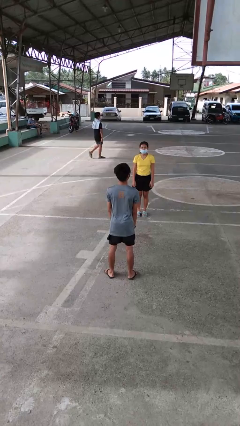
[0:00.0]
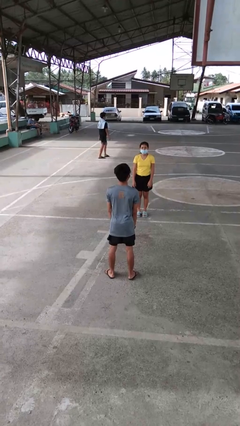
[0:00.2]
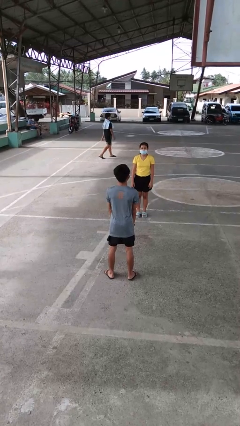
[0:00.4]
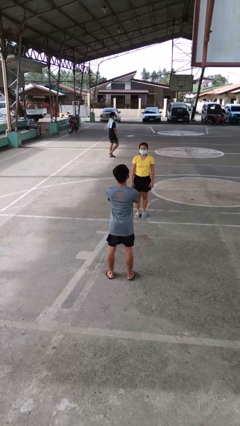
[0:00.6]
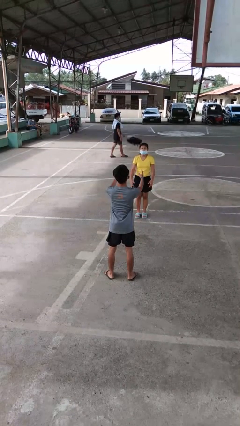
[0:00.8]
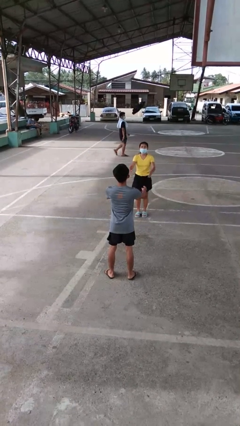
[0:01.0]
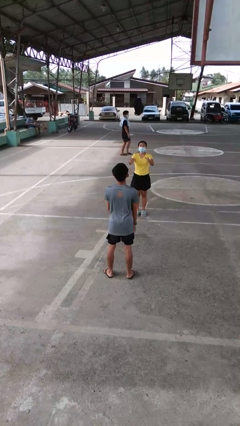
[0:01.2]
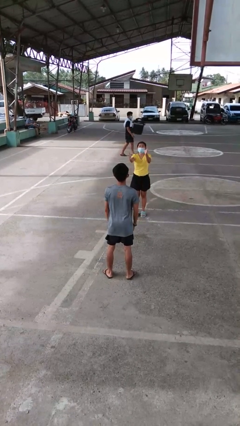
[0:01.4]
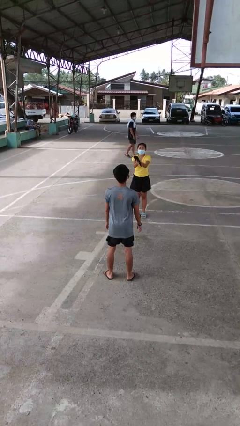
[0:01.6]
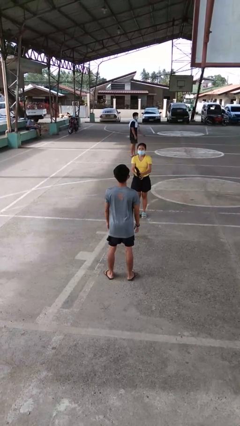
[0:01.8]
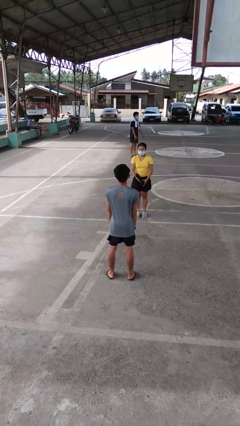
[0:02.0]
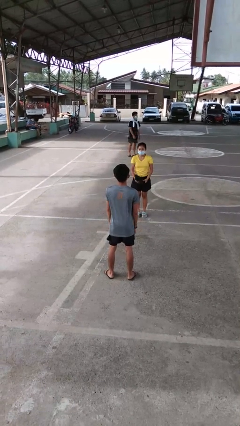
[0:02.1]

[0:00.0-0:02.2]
person throws object to person

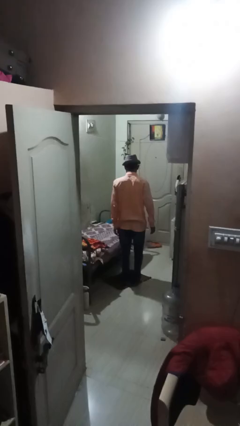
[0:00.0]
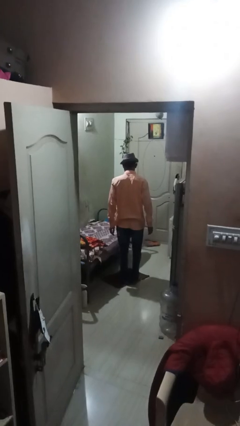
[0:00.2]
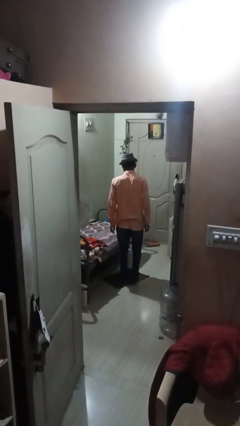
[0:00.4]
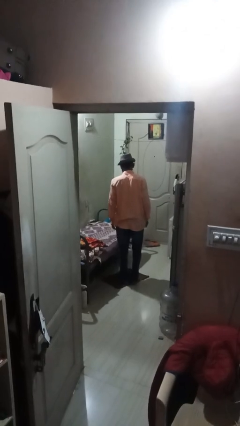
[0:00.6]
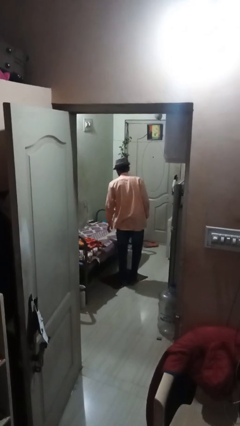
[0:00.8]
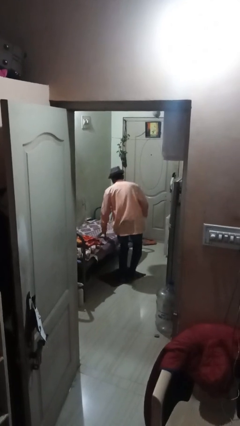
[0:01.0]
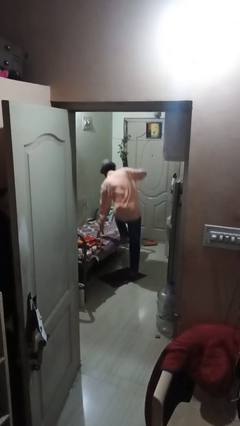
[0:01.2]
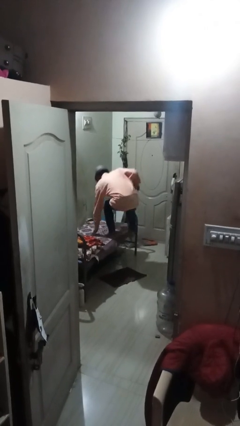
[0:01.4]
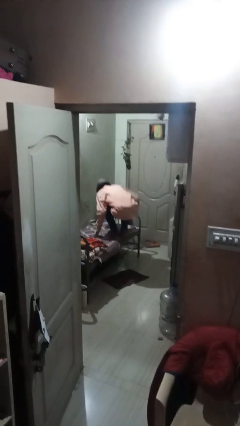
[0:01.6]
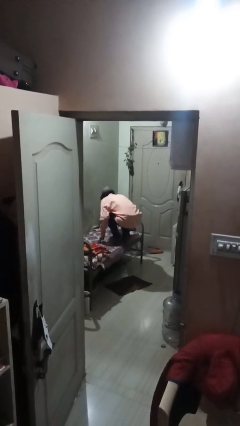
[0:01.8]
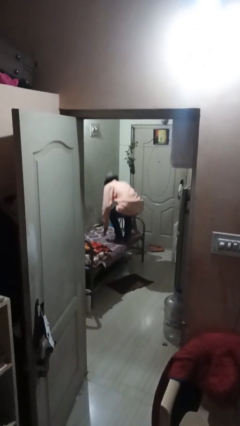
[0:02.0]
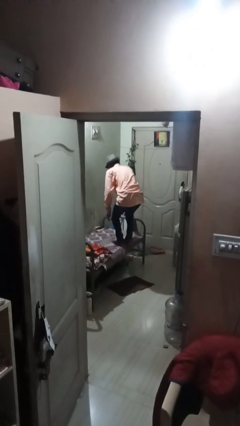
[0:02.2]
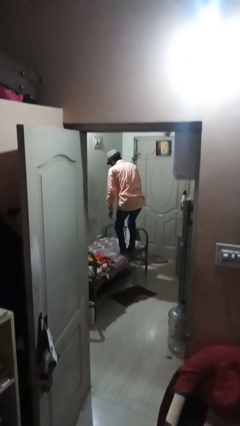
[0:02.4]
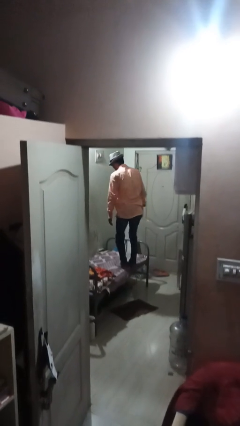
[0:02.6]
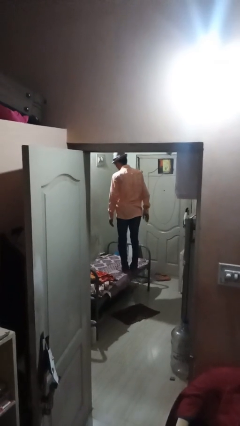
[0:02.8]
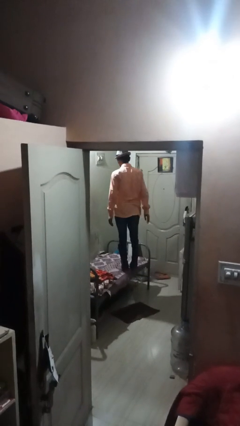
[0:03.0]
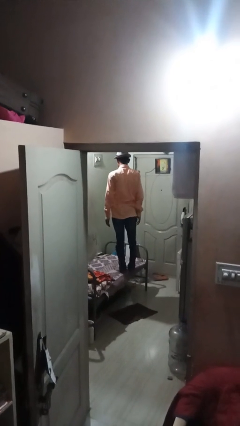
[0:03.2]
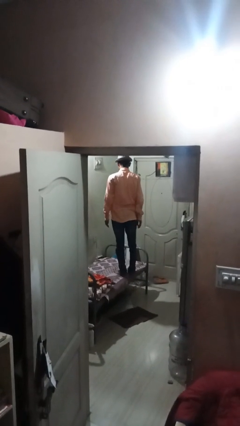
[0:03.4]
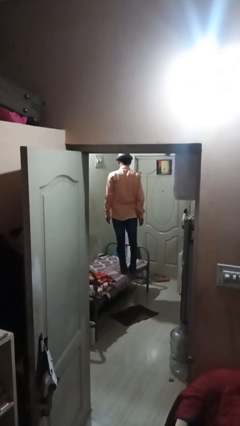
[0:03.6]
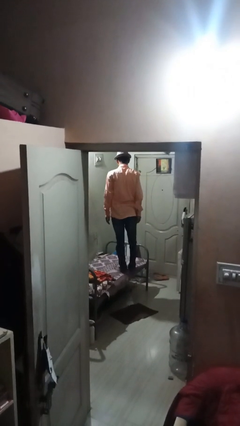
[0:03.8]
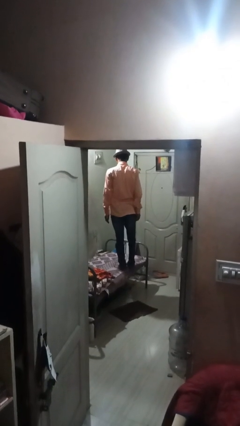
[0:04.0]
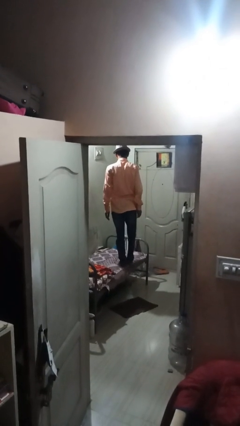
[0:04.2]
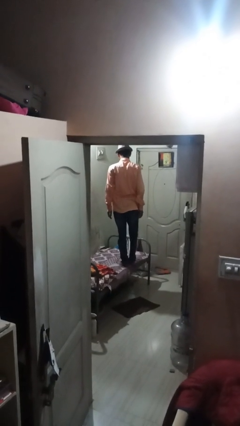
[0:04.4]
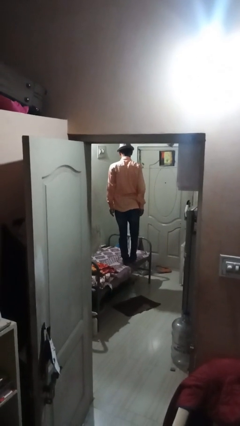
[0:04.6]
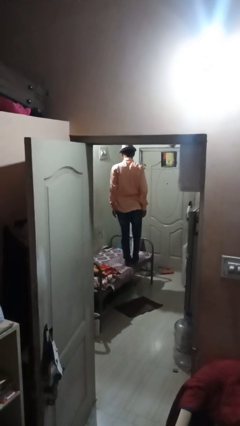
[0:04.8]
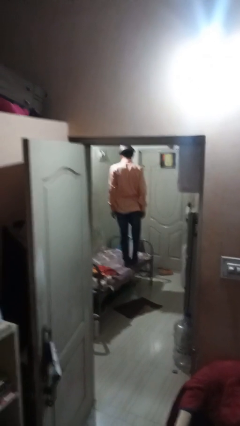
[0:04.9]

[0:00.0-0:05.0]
person jumps on bed

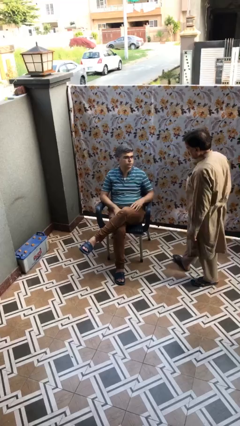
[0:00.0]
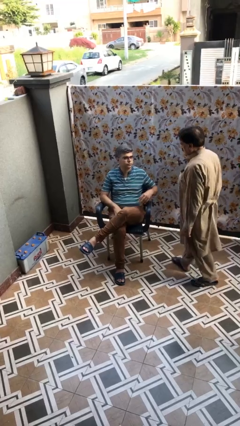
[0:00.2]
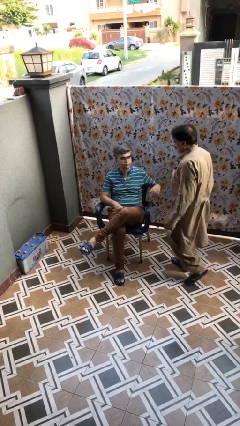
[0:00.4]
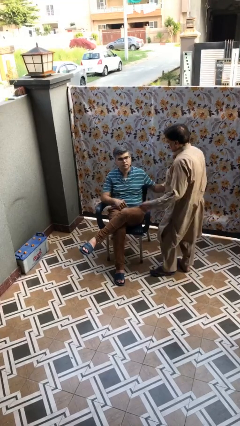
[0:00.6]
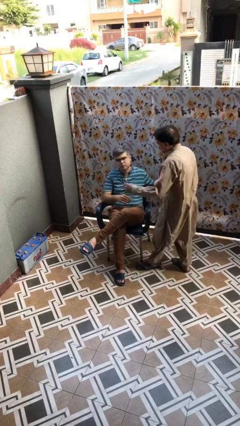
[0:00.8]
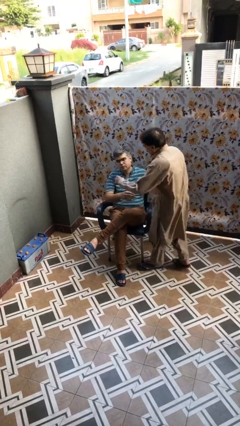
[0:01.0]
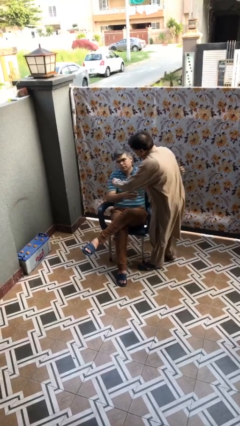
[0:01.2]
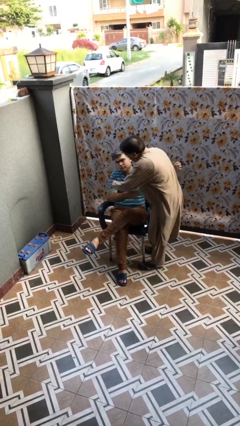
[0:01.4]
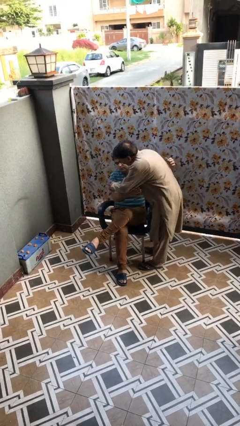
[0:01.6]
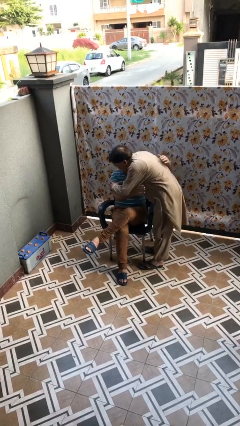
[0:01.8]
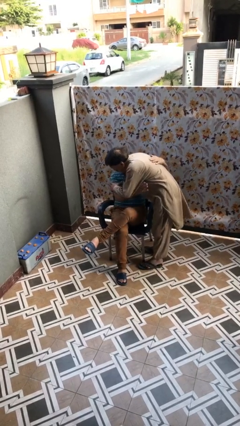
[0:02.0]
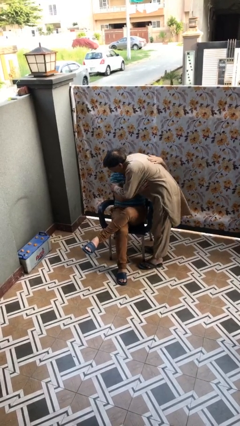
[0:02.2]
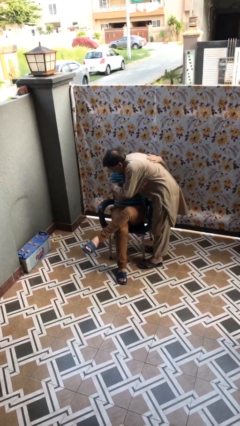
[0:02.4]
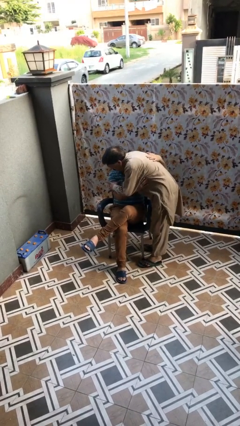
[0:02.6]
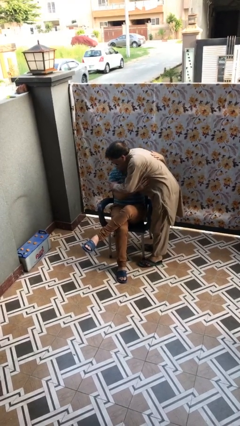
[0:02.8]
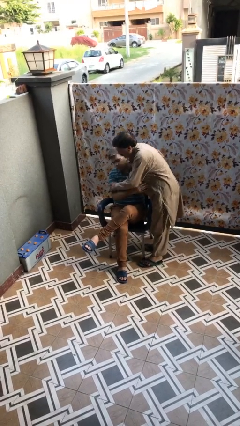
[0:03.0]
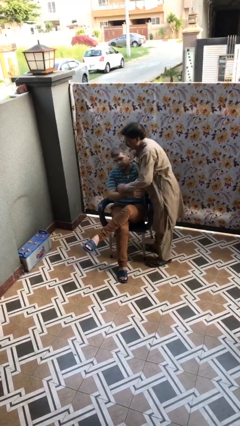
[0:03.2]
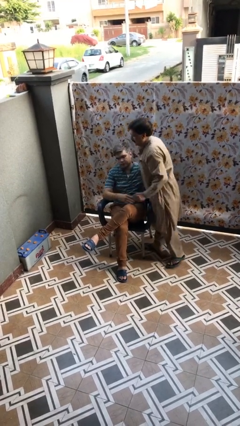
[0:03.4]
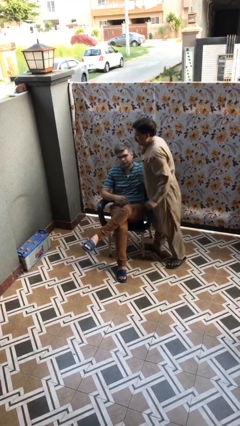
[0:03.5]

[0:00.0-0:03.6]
person embraces person

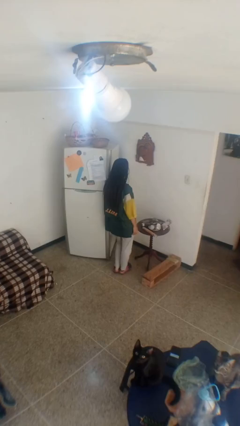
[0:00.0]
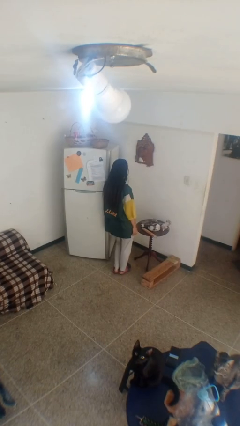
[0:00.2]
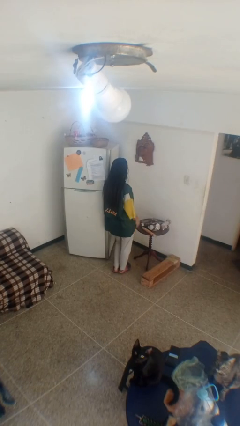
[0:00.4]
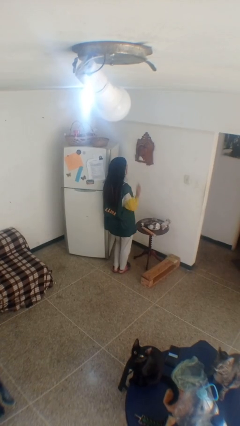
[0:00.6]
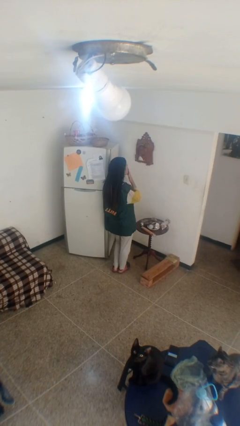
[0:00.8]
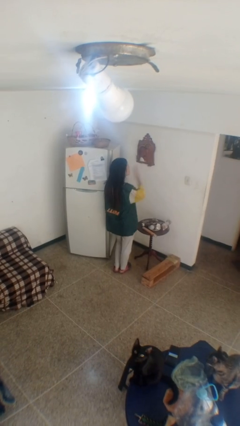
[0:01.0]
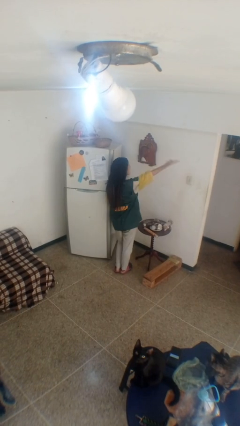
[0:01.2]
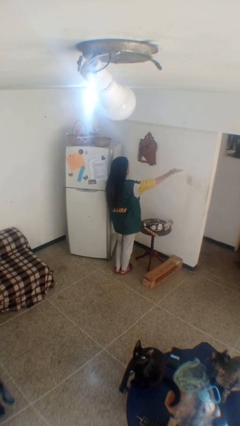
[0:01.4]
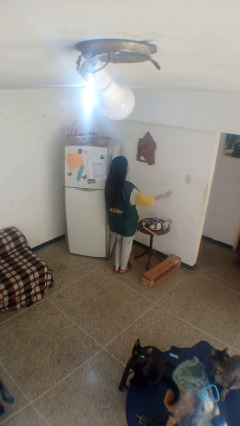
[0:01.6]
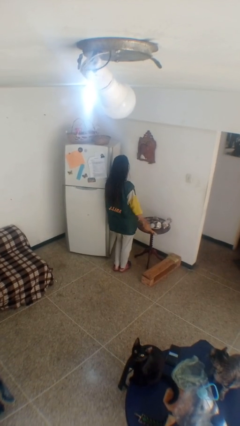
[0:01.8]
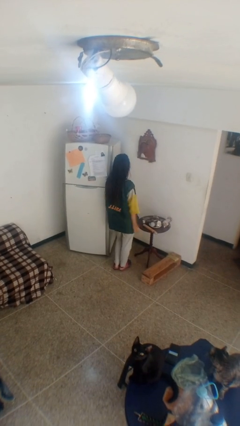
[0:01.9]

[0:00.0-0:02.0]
person gestures blow kiss

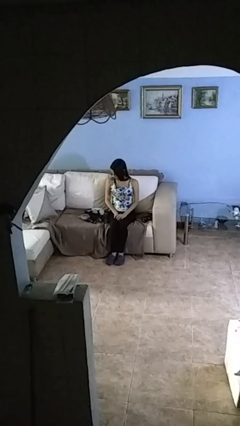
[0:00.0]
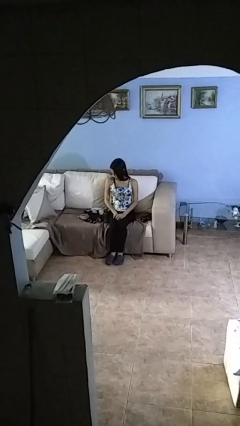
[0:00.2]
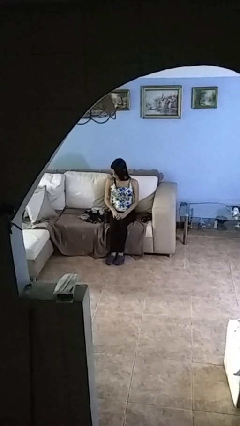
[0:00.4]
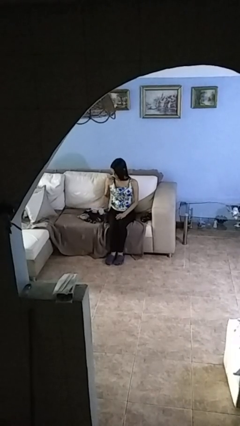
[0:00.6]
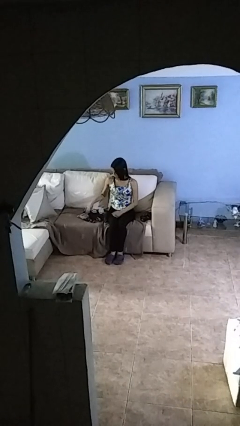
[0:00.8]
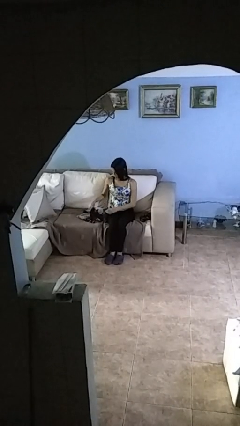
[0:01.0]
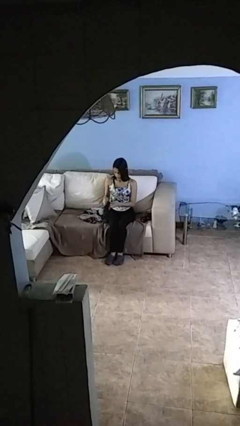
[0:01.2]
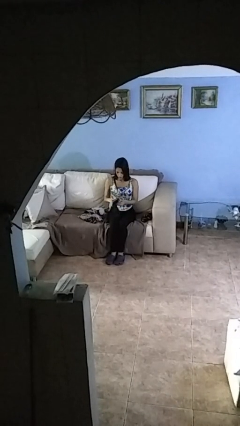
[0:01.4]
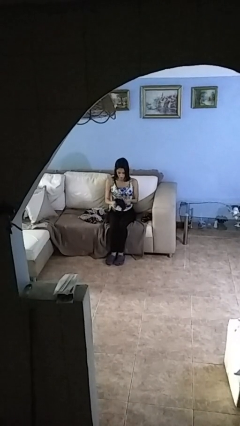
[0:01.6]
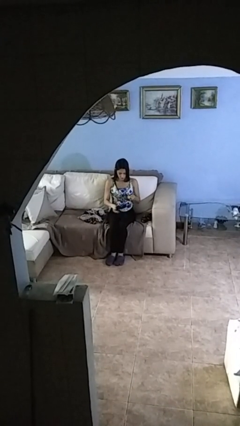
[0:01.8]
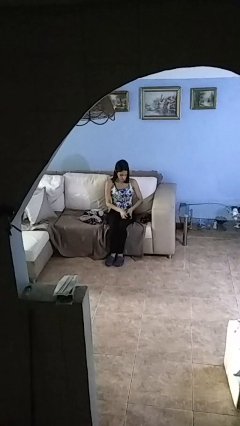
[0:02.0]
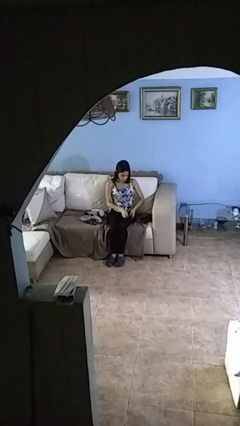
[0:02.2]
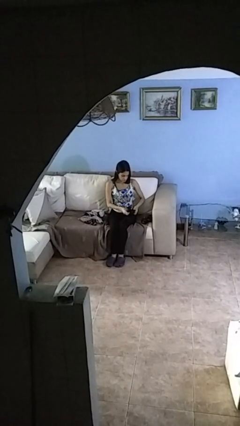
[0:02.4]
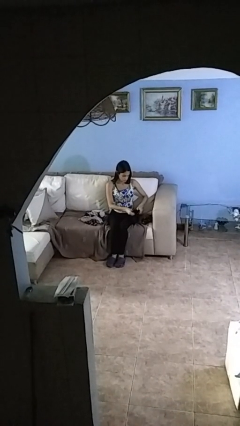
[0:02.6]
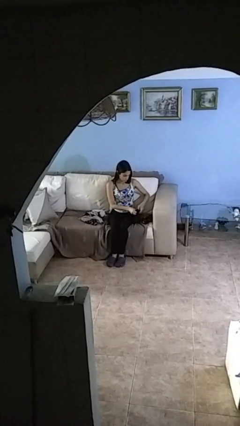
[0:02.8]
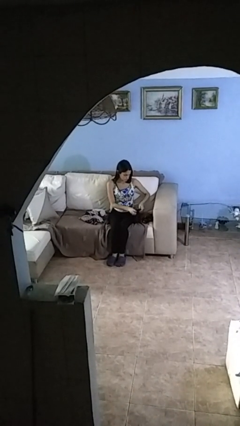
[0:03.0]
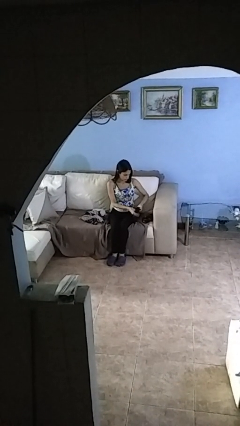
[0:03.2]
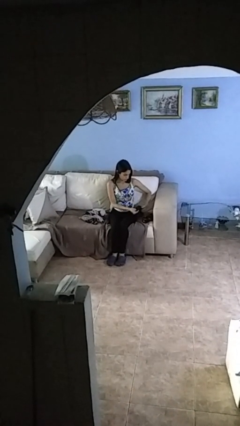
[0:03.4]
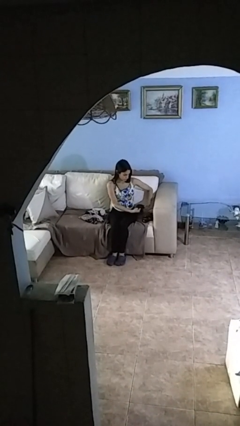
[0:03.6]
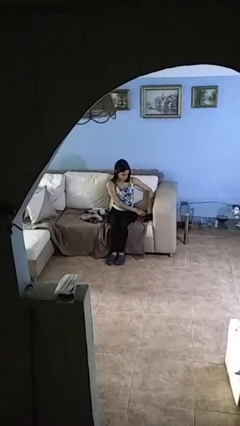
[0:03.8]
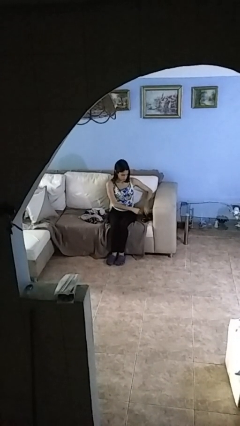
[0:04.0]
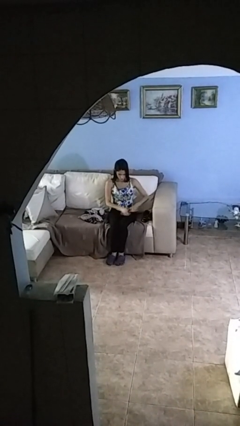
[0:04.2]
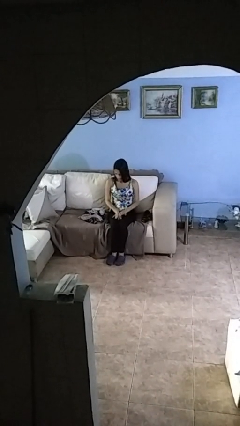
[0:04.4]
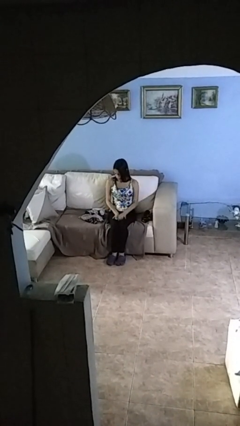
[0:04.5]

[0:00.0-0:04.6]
person folds socks

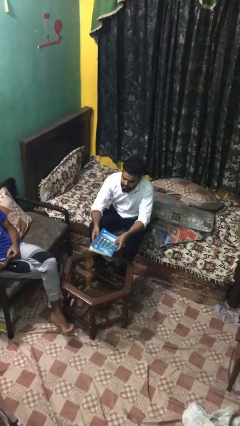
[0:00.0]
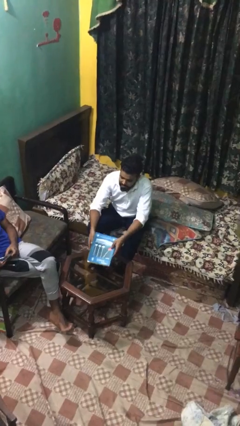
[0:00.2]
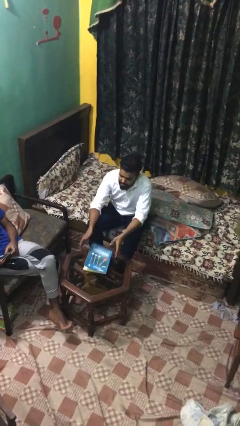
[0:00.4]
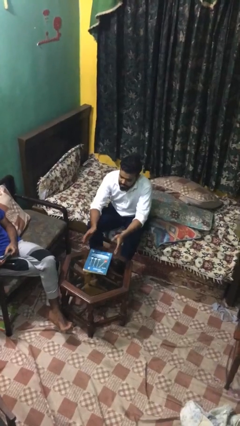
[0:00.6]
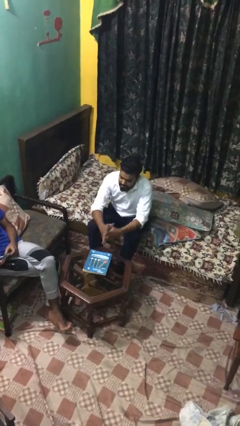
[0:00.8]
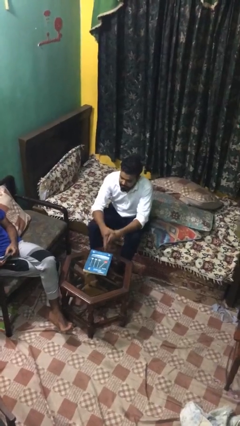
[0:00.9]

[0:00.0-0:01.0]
person puts down object on table
